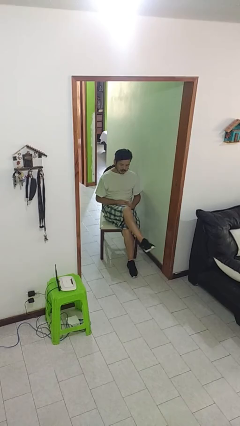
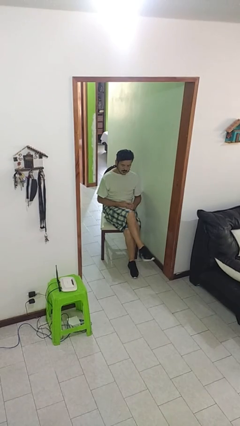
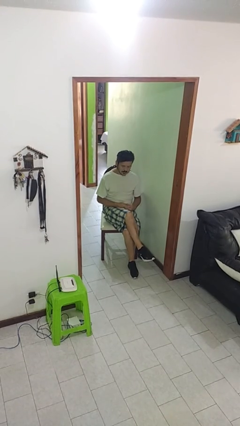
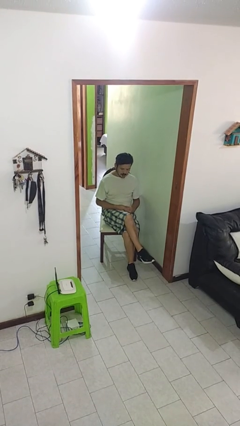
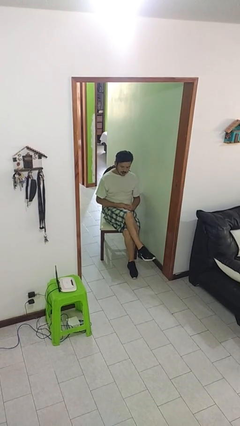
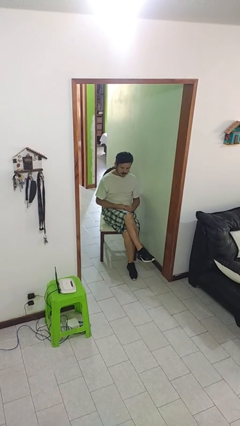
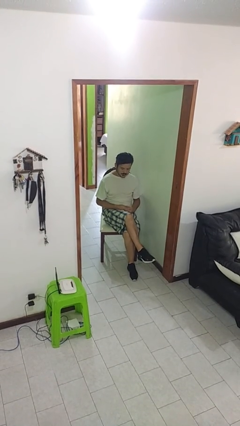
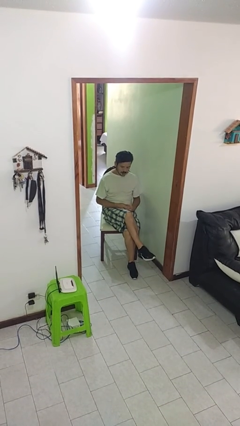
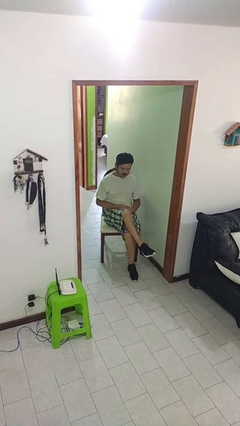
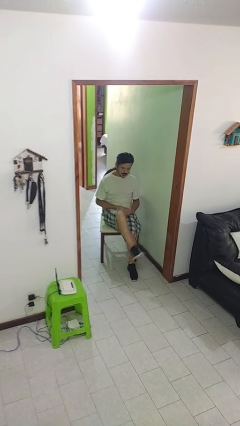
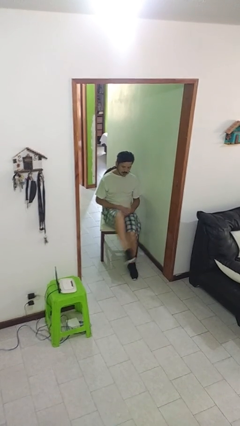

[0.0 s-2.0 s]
person crosses legs

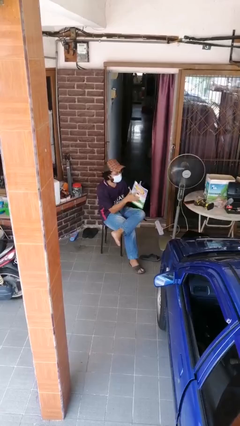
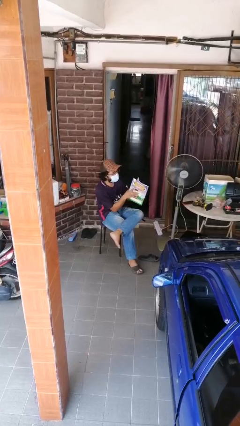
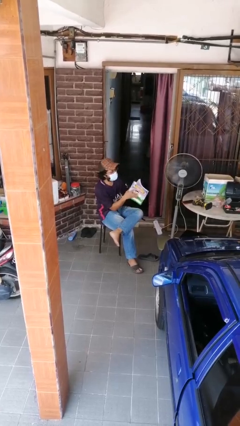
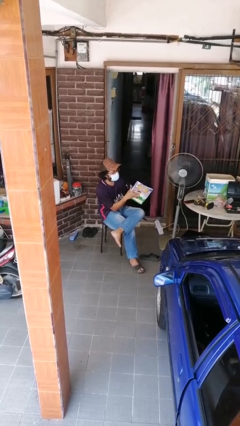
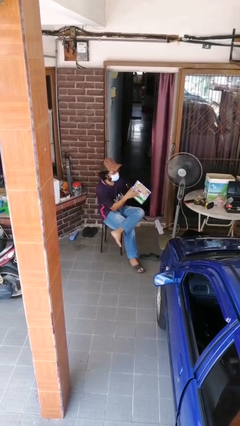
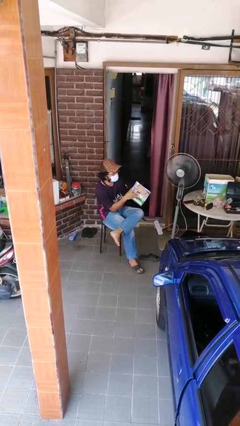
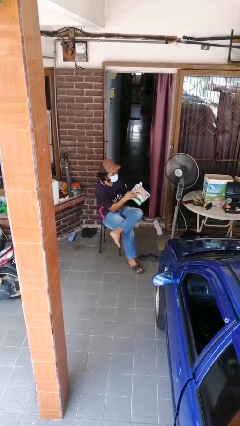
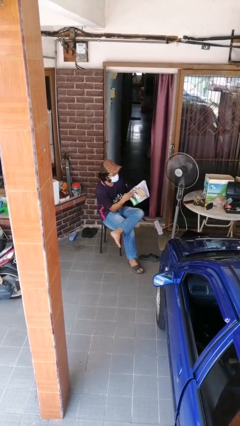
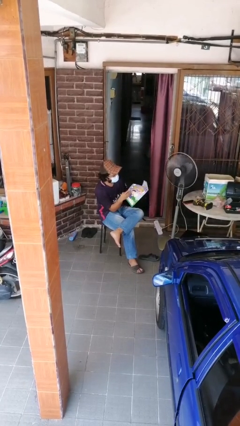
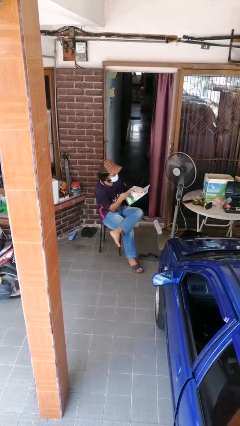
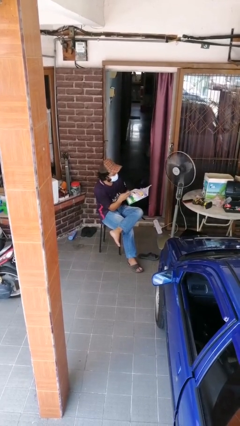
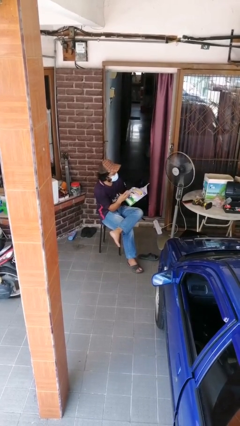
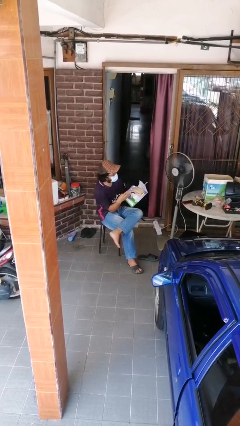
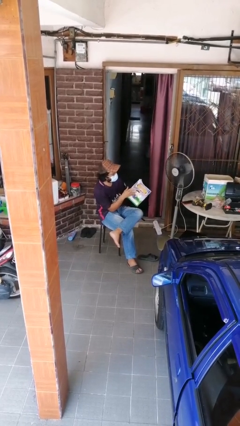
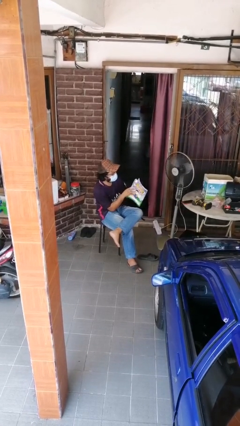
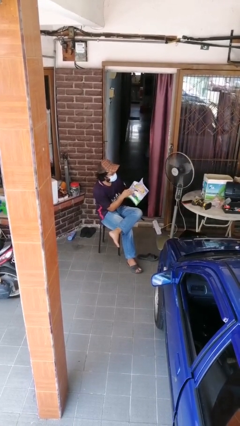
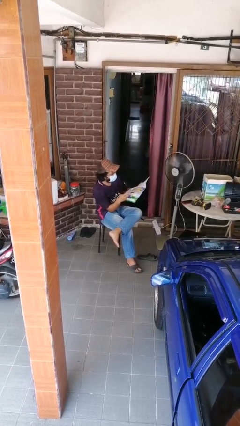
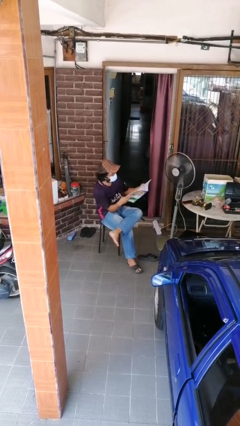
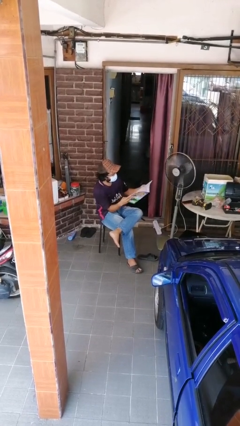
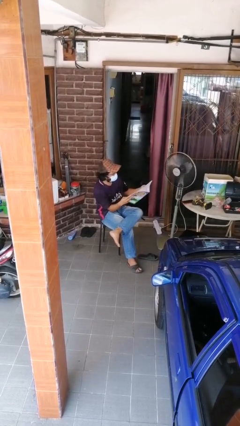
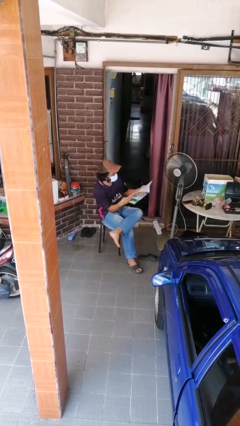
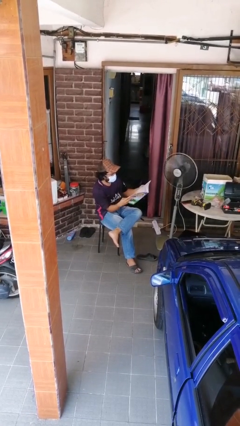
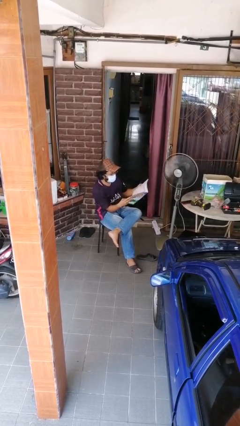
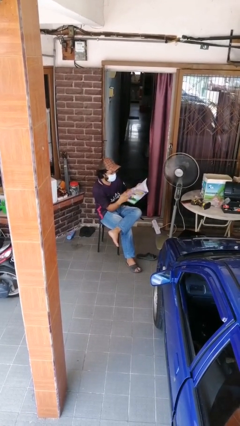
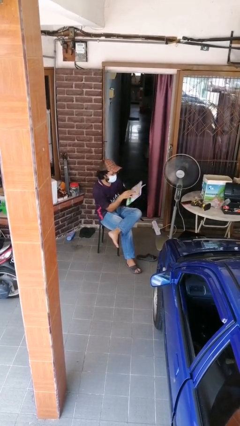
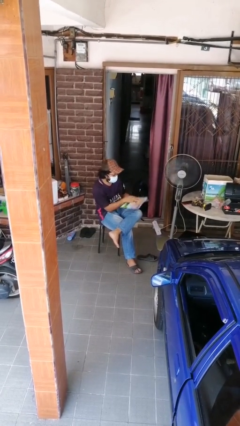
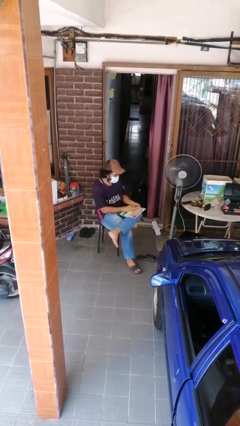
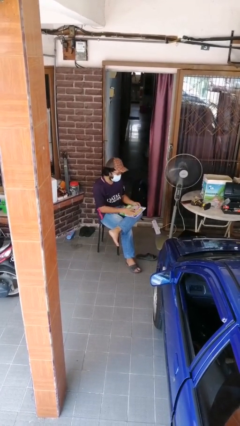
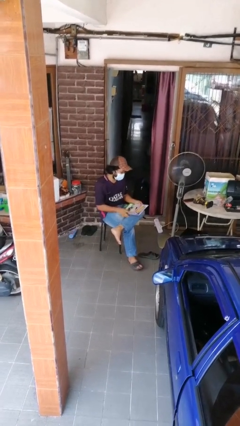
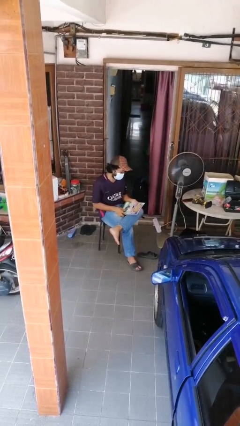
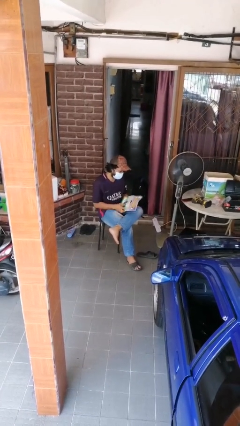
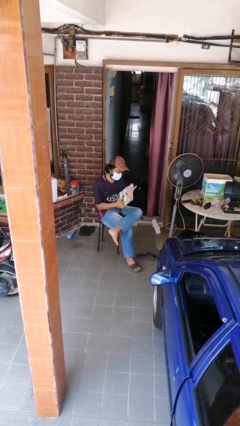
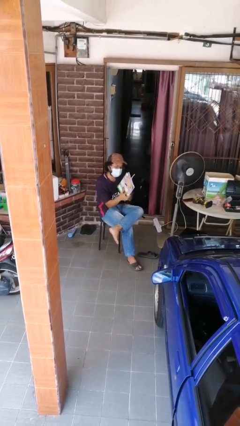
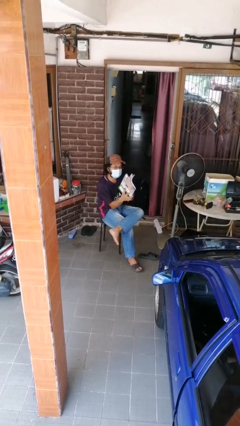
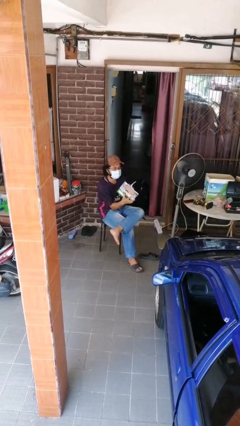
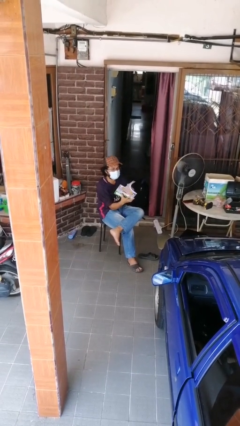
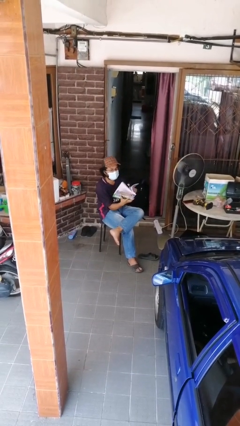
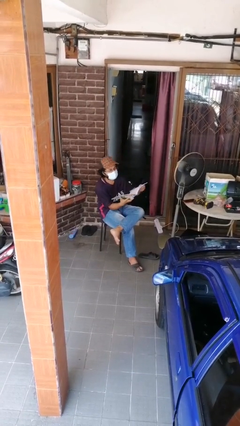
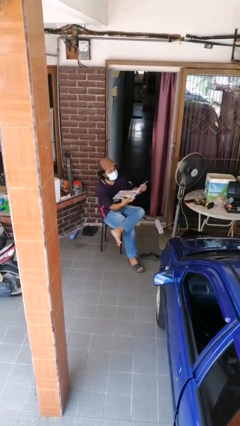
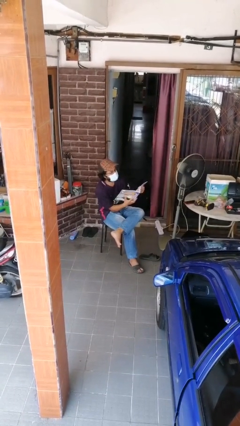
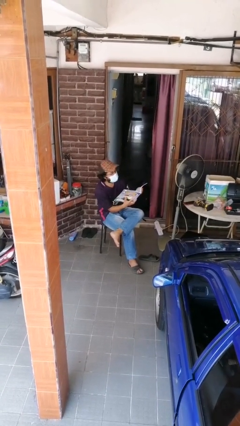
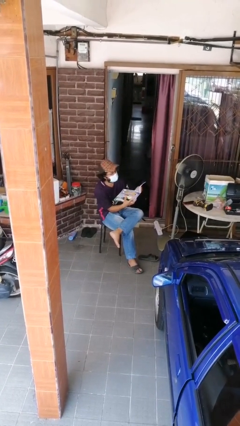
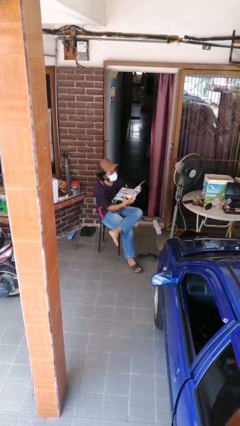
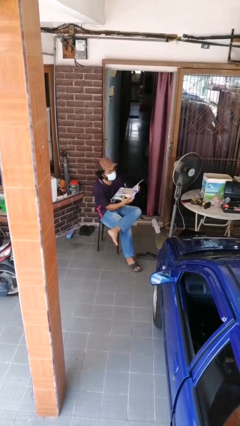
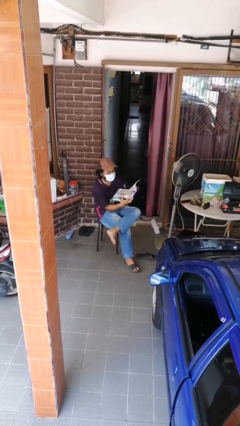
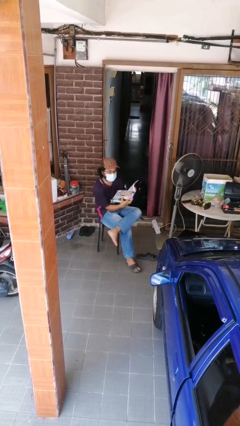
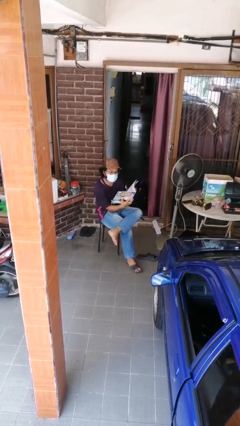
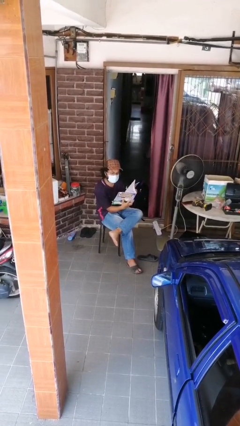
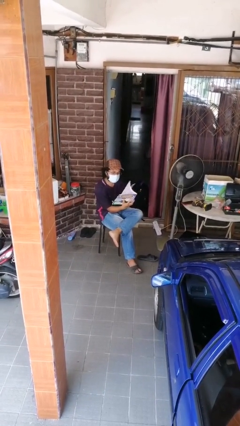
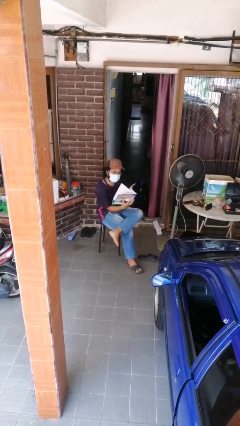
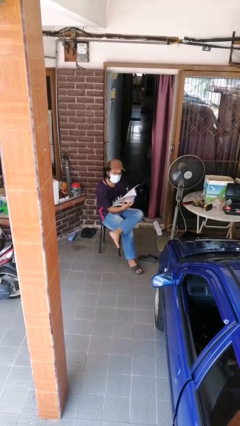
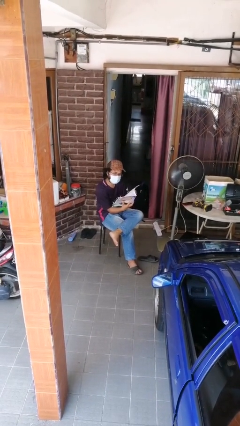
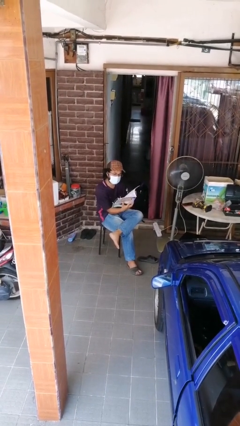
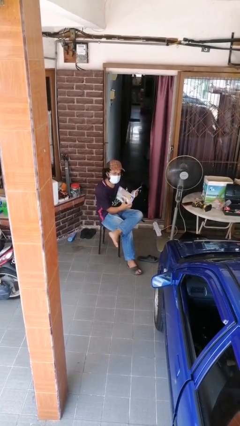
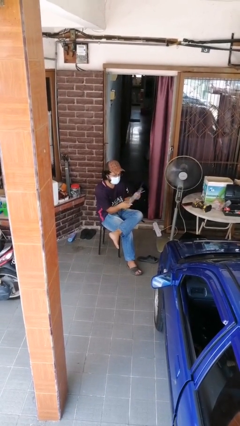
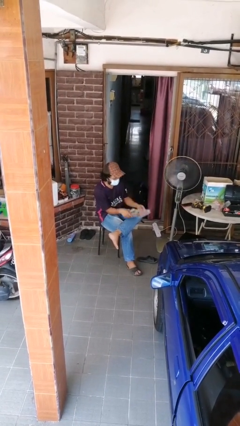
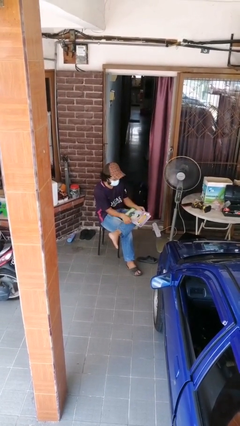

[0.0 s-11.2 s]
person reads document

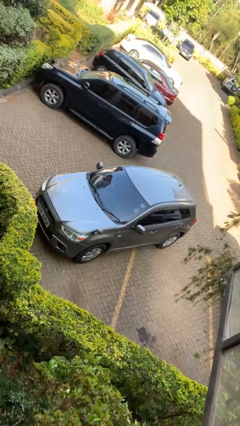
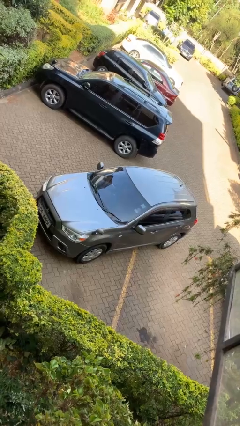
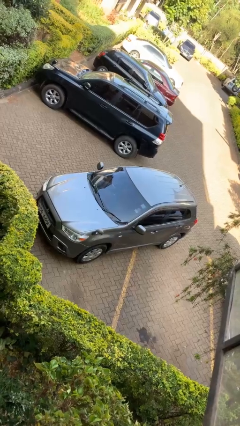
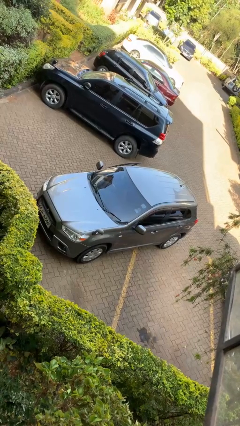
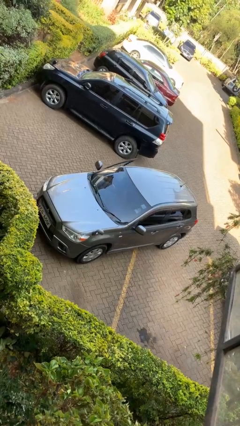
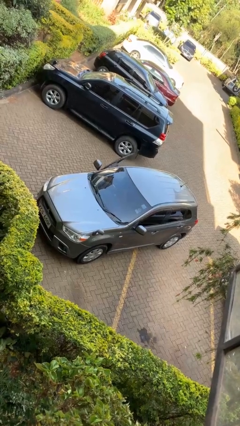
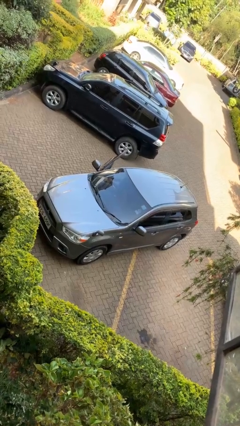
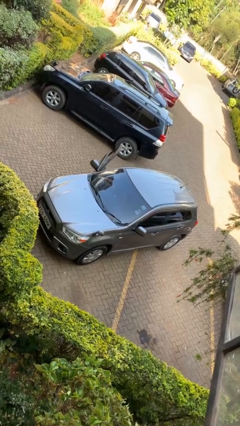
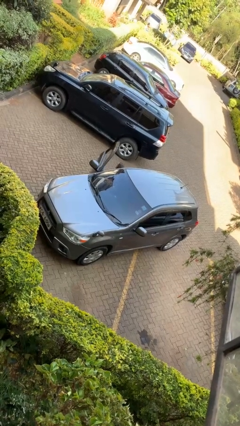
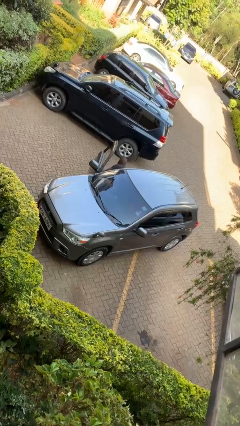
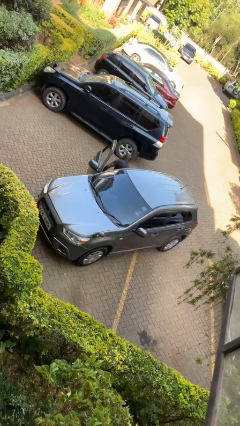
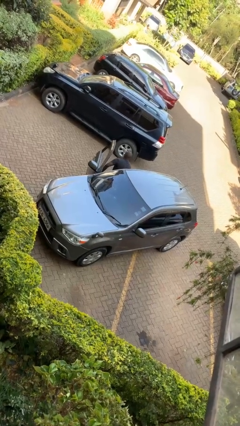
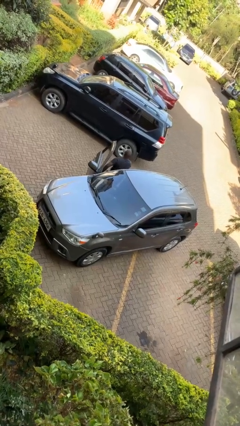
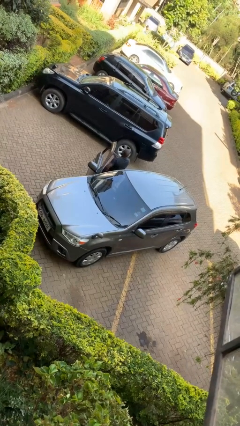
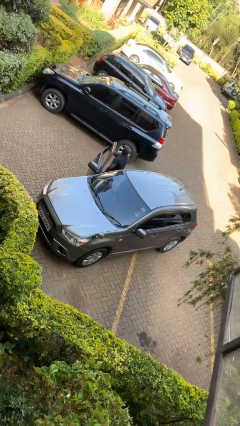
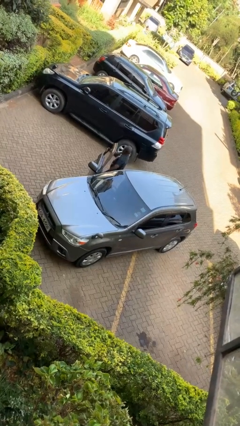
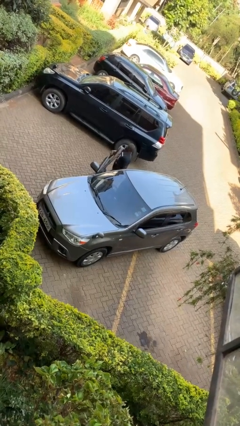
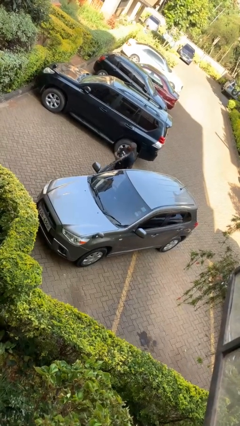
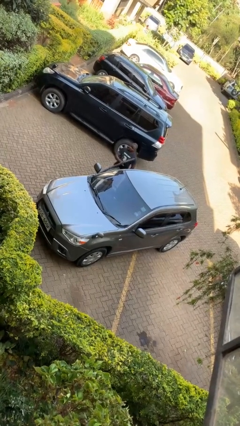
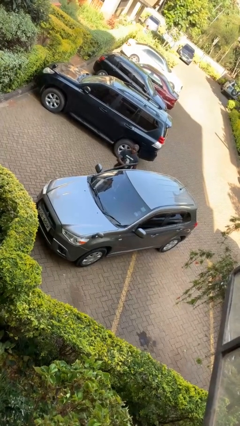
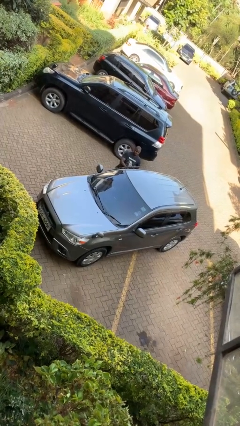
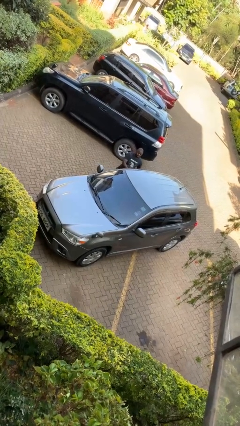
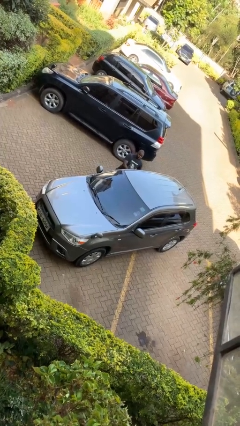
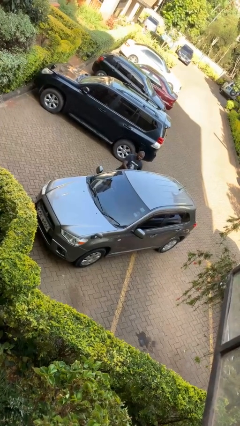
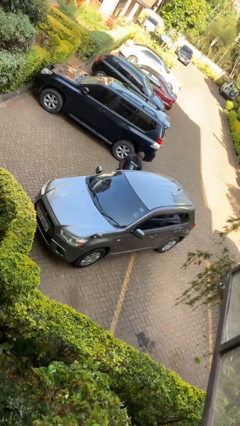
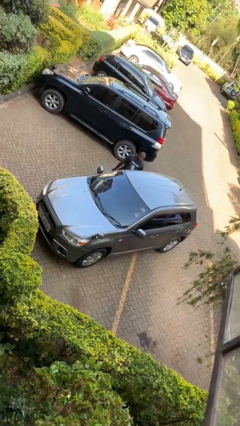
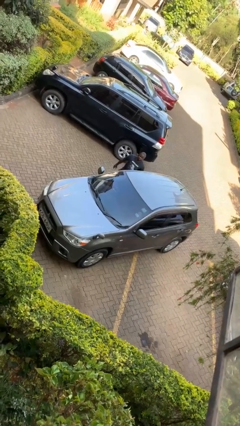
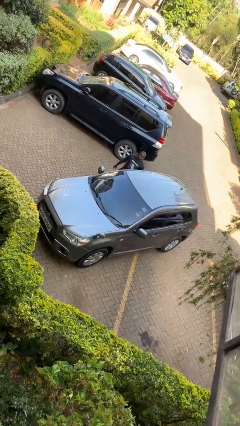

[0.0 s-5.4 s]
car drops off person
